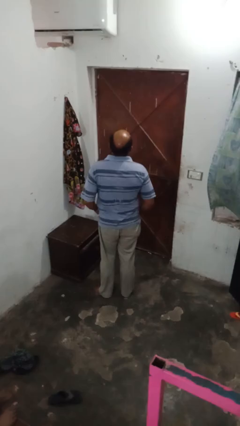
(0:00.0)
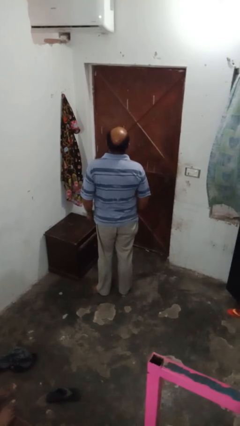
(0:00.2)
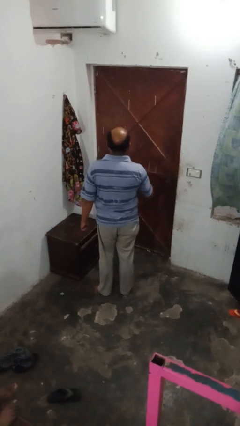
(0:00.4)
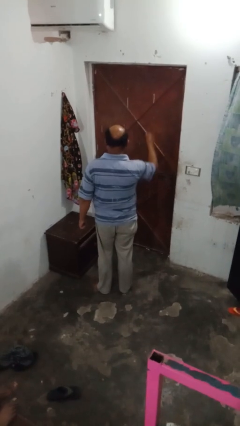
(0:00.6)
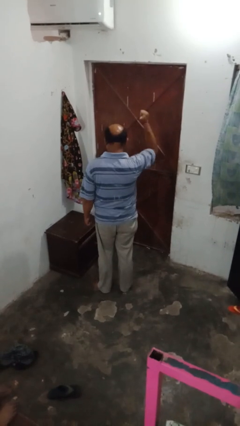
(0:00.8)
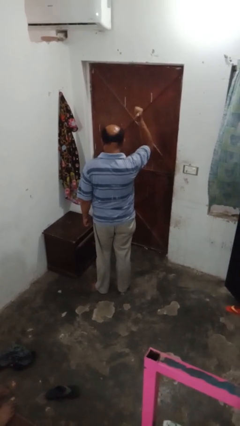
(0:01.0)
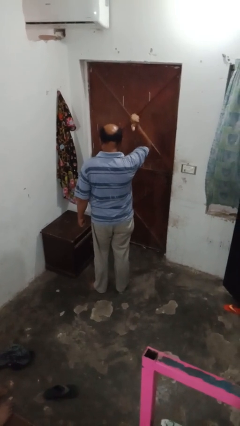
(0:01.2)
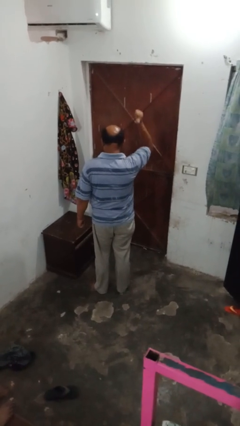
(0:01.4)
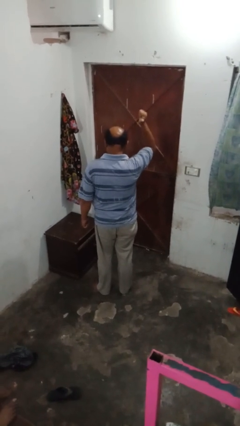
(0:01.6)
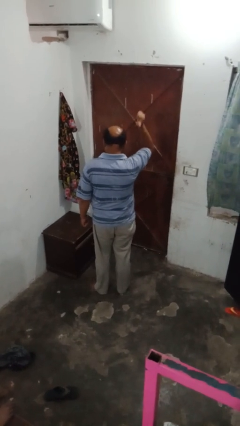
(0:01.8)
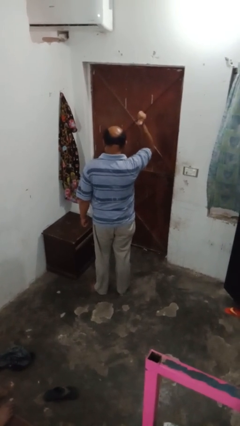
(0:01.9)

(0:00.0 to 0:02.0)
person gestures behind me

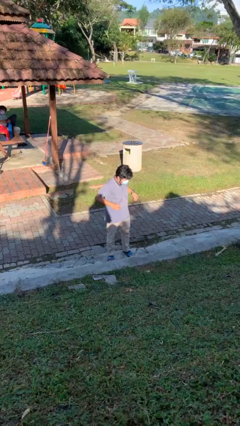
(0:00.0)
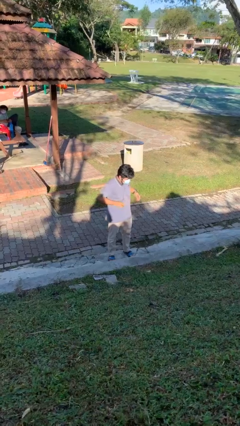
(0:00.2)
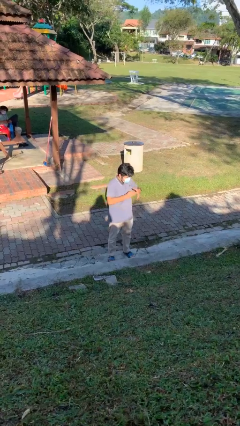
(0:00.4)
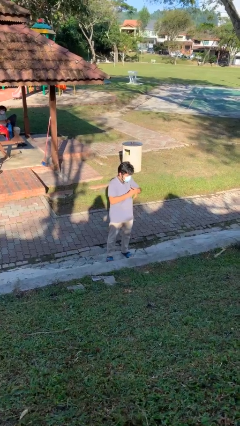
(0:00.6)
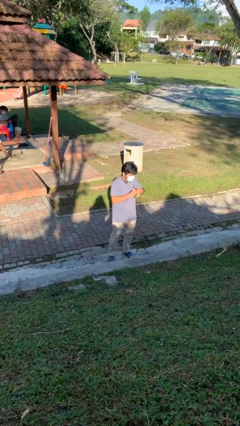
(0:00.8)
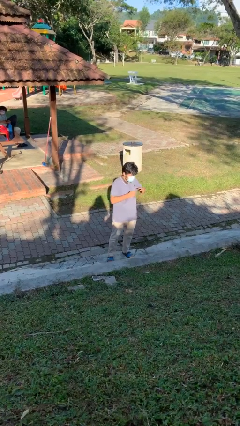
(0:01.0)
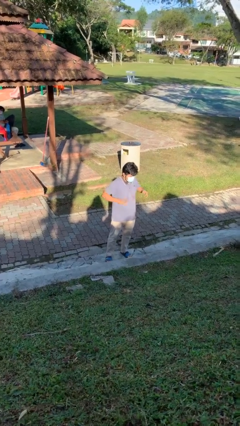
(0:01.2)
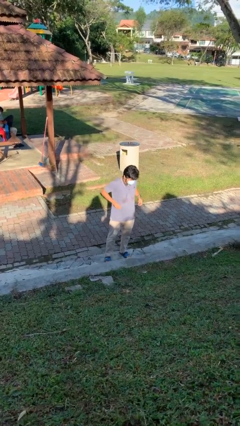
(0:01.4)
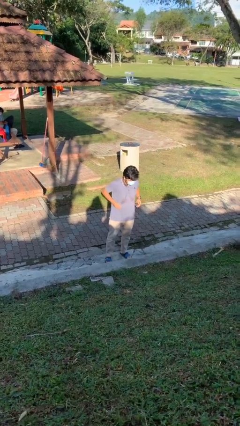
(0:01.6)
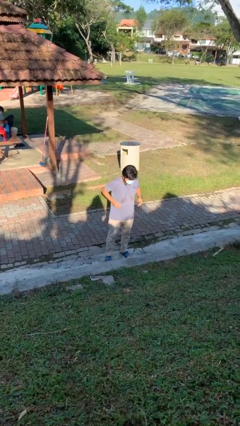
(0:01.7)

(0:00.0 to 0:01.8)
person takes off ring

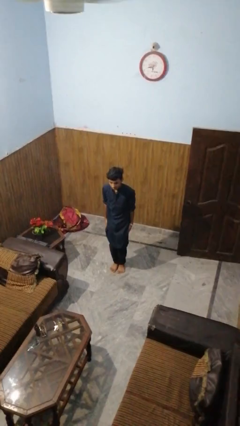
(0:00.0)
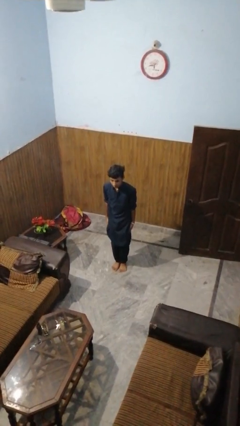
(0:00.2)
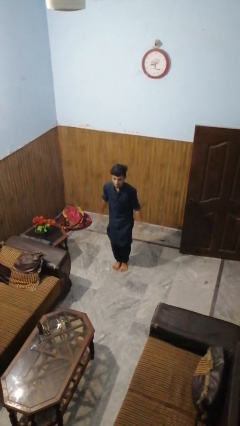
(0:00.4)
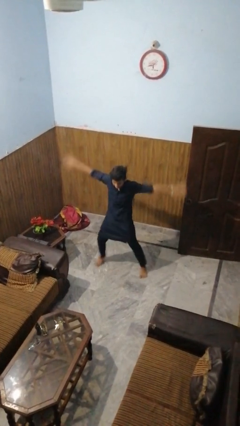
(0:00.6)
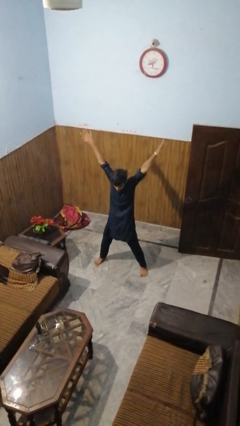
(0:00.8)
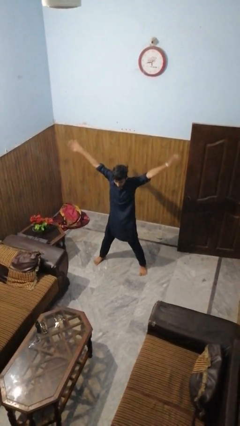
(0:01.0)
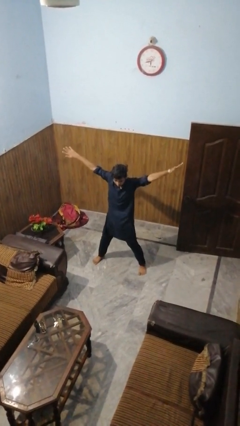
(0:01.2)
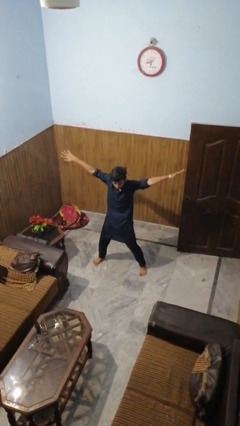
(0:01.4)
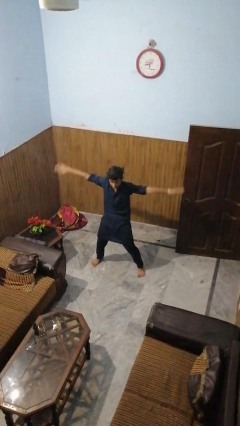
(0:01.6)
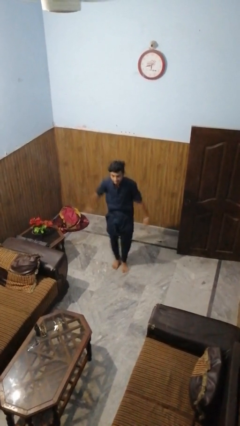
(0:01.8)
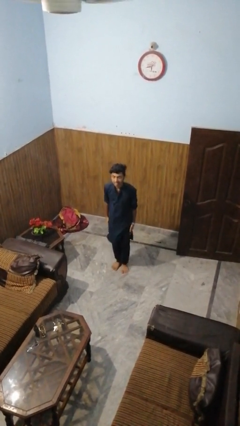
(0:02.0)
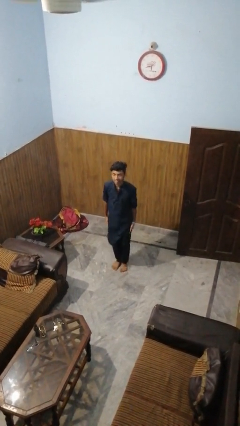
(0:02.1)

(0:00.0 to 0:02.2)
person exercises with jumping jacks

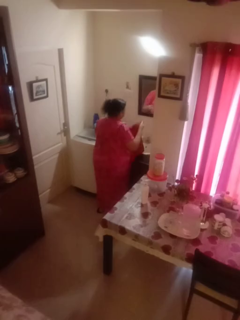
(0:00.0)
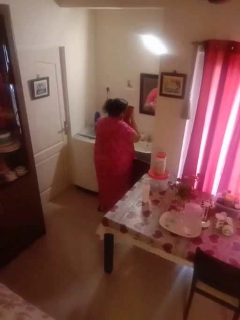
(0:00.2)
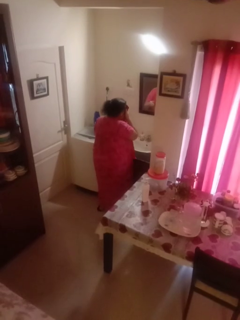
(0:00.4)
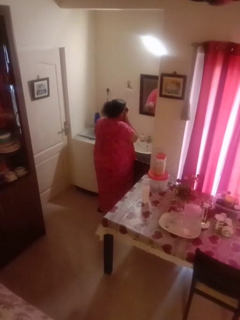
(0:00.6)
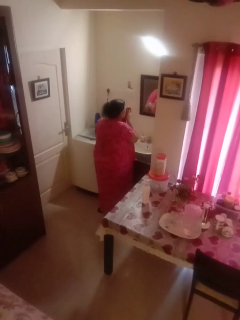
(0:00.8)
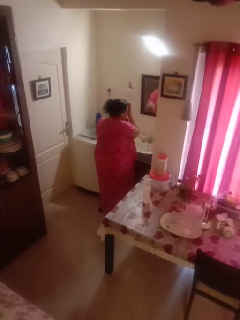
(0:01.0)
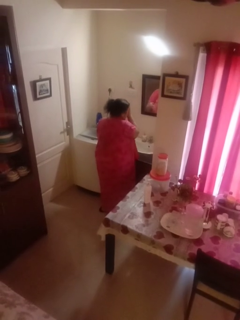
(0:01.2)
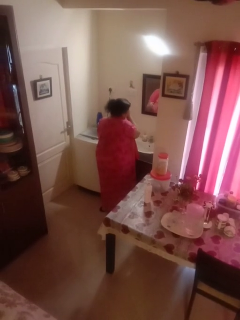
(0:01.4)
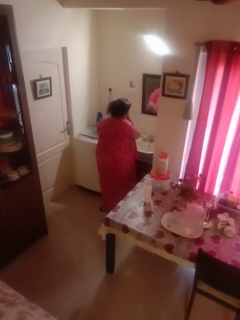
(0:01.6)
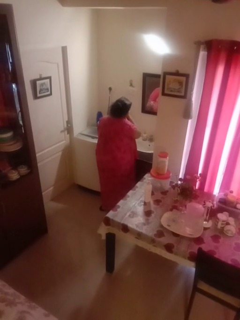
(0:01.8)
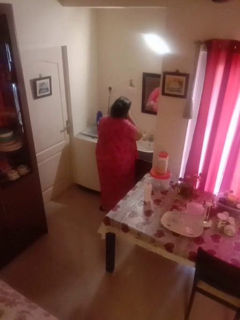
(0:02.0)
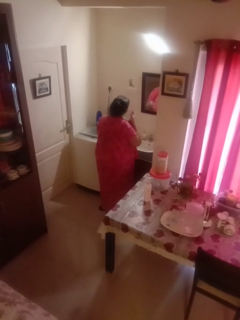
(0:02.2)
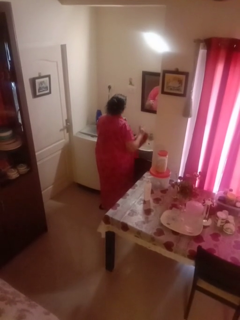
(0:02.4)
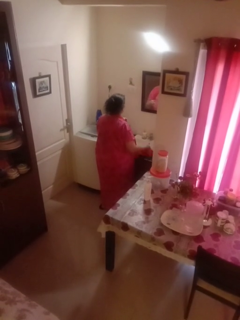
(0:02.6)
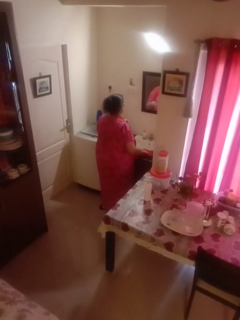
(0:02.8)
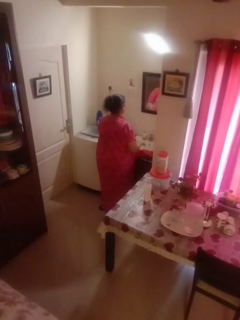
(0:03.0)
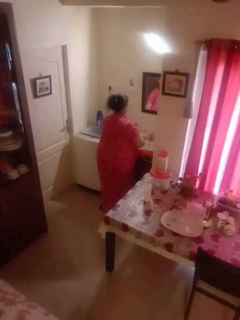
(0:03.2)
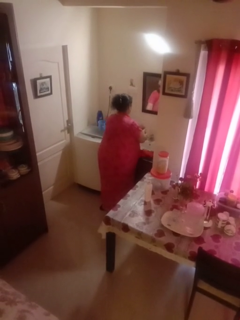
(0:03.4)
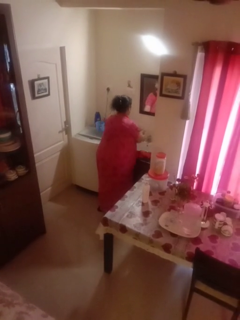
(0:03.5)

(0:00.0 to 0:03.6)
person dries face with towel

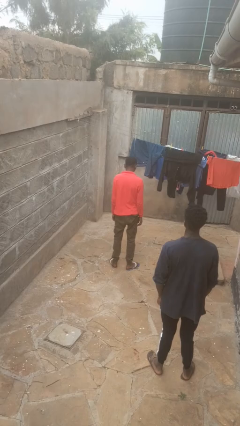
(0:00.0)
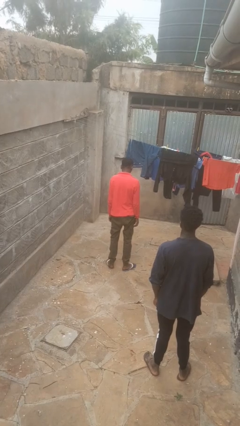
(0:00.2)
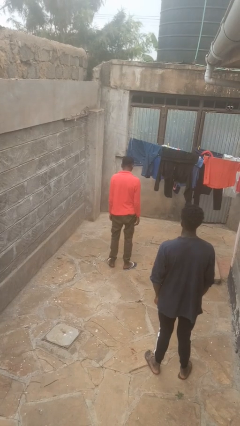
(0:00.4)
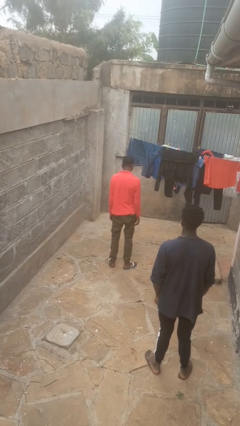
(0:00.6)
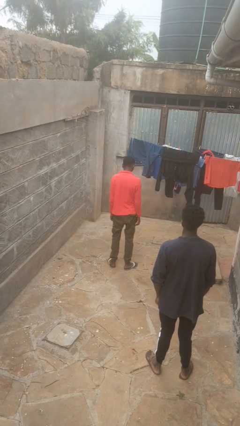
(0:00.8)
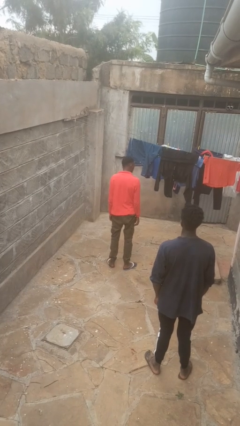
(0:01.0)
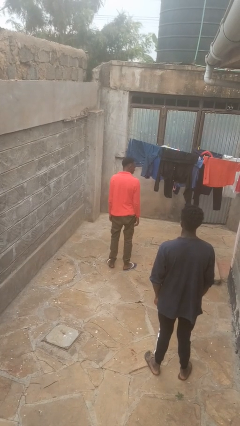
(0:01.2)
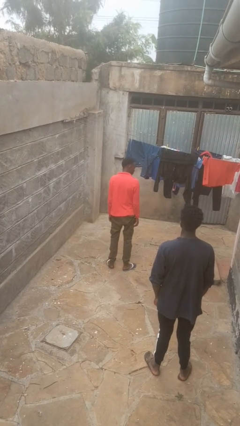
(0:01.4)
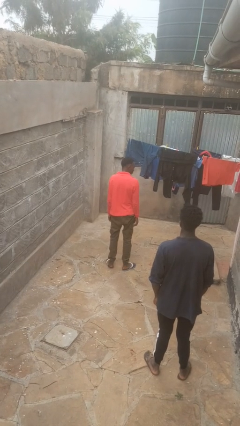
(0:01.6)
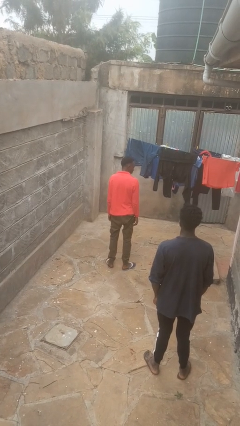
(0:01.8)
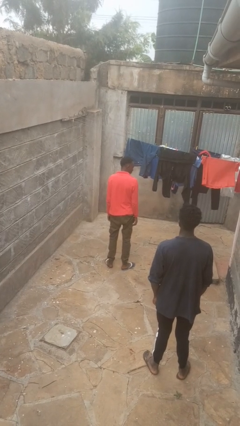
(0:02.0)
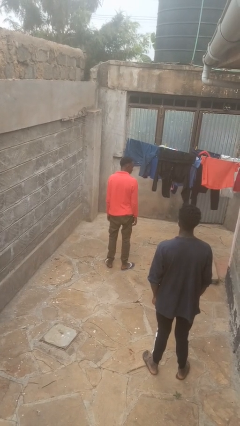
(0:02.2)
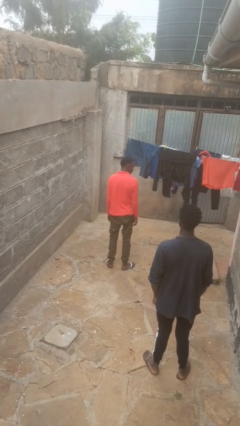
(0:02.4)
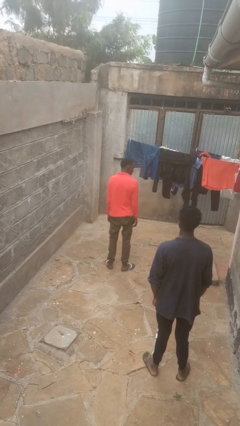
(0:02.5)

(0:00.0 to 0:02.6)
person looks over shoulder

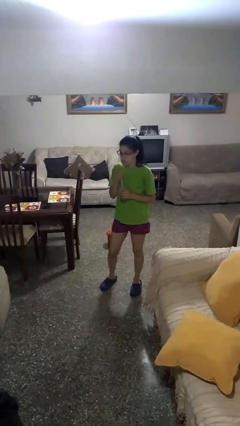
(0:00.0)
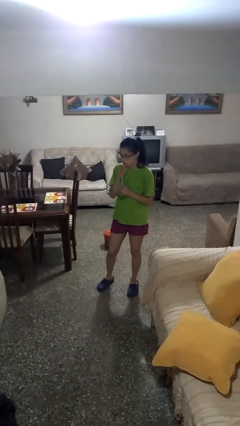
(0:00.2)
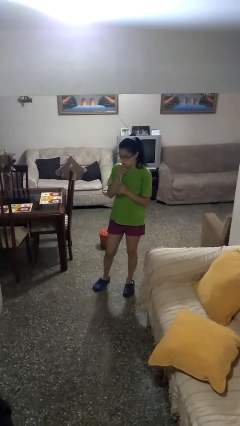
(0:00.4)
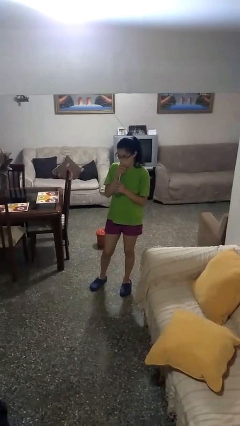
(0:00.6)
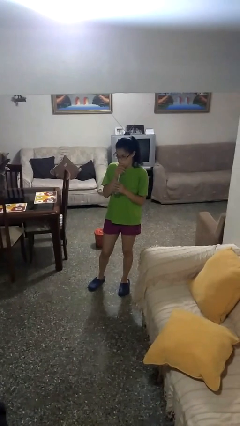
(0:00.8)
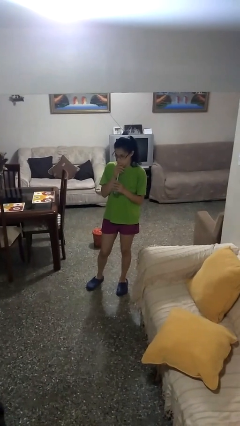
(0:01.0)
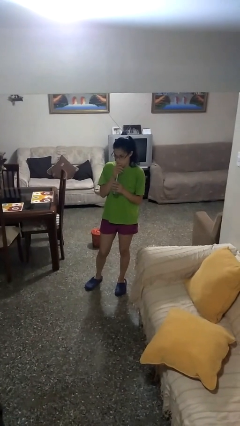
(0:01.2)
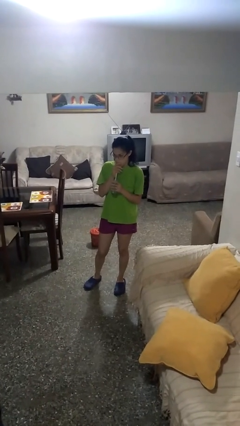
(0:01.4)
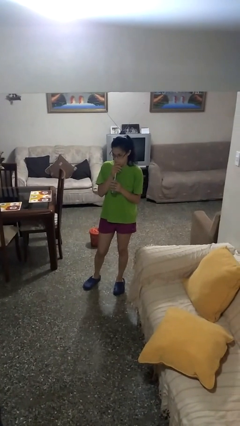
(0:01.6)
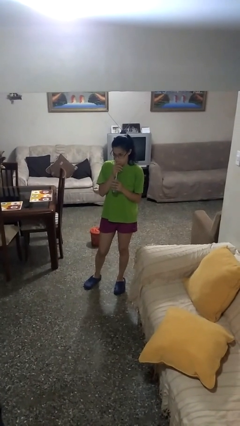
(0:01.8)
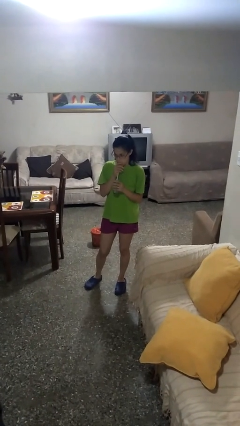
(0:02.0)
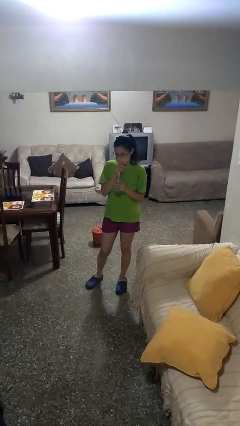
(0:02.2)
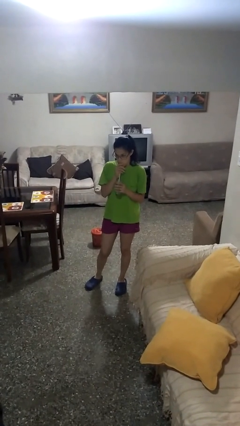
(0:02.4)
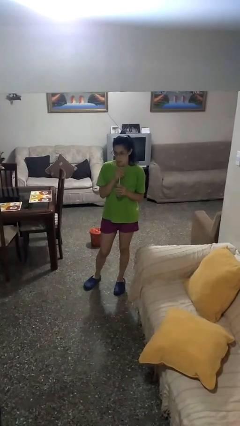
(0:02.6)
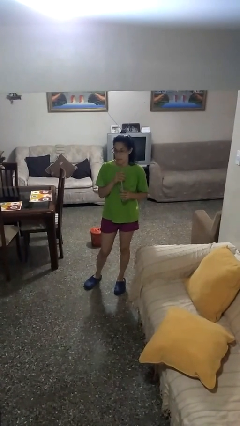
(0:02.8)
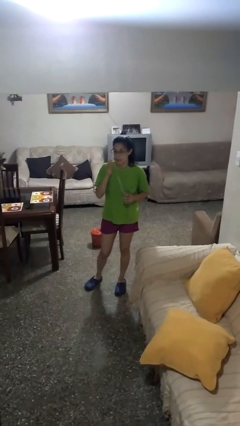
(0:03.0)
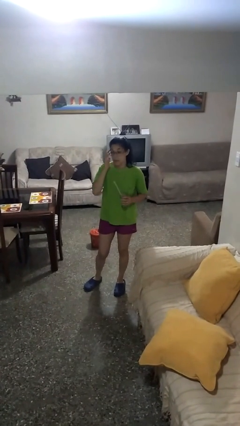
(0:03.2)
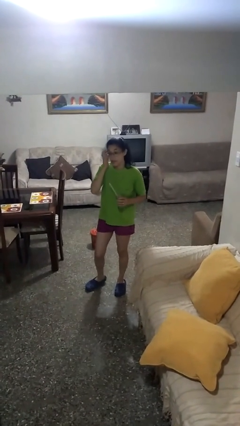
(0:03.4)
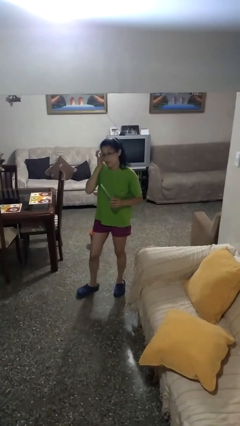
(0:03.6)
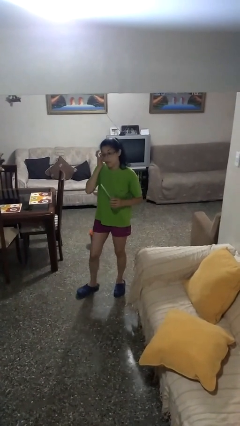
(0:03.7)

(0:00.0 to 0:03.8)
person drinks from straw

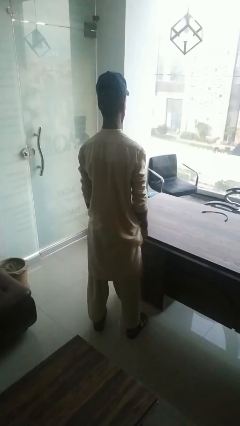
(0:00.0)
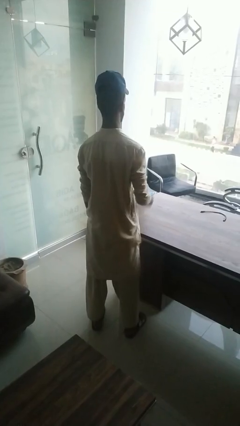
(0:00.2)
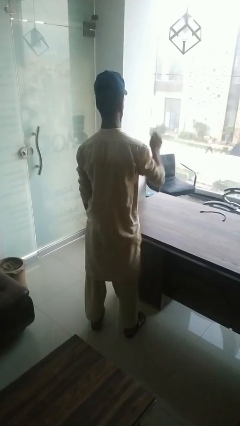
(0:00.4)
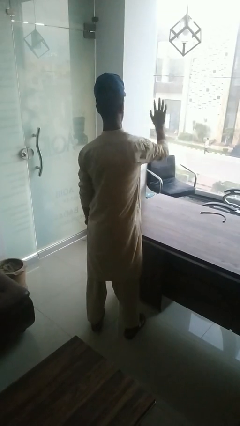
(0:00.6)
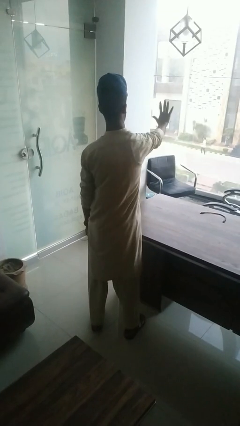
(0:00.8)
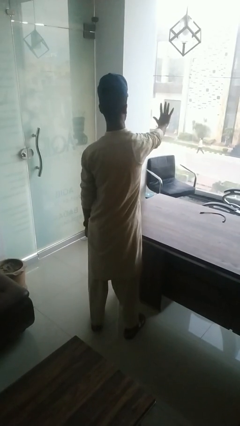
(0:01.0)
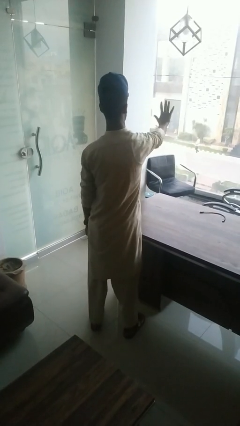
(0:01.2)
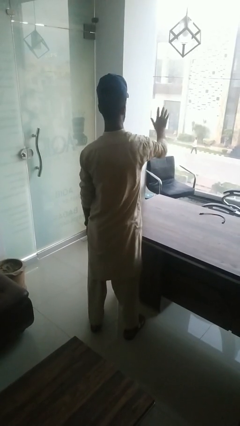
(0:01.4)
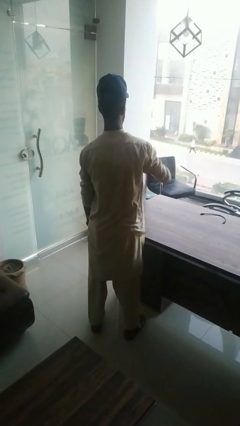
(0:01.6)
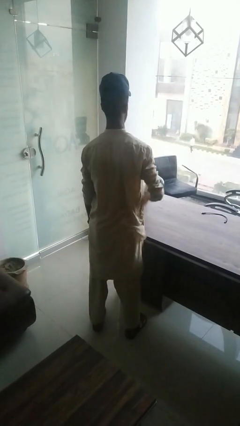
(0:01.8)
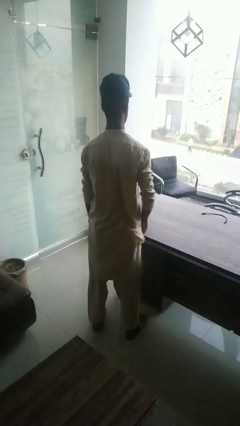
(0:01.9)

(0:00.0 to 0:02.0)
person gestures stop

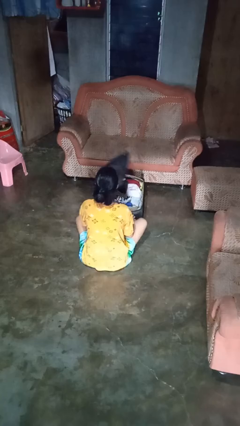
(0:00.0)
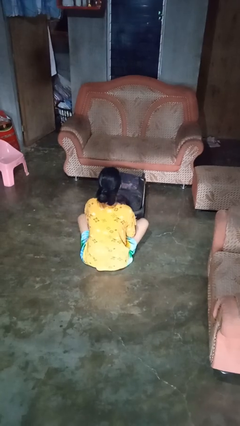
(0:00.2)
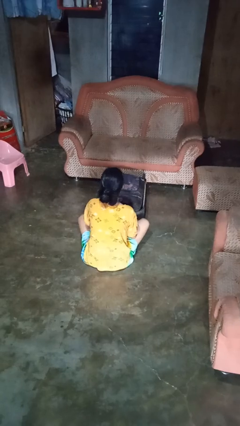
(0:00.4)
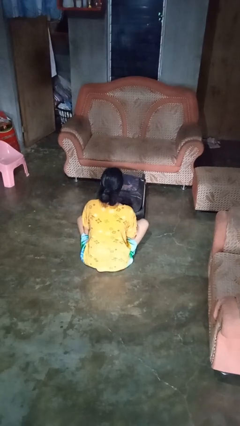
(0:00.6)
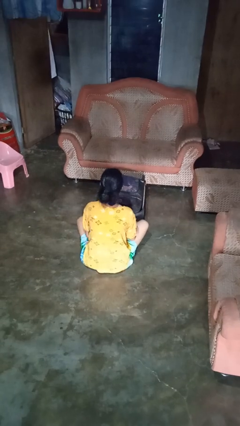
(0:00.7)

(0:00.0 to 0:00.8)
person closes suitcase
